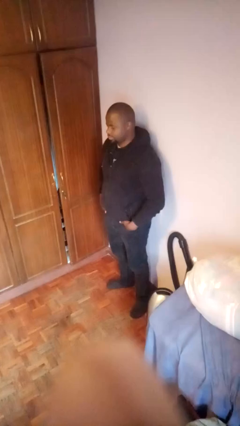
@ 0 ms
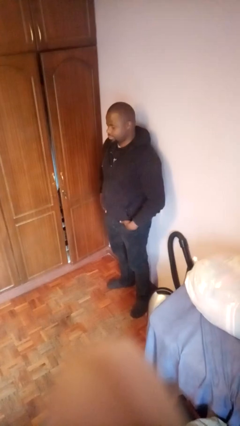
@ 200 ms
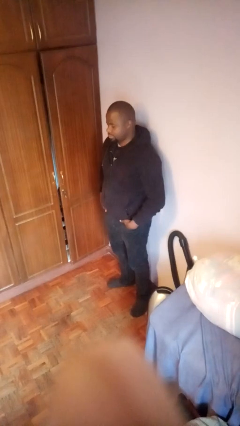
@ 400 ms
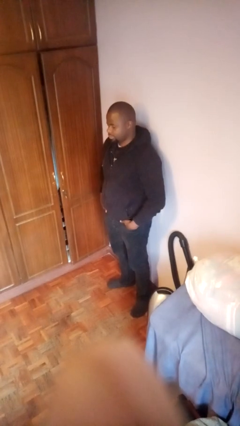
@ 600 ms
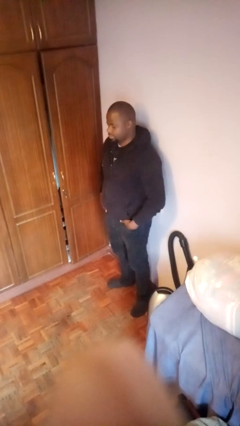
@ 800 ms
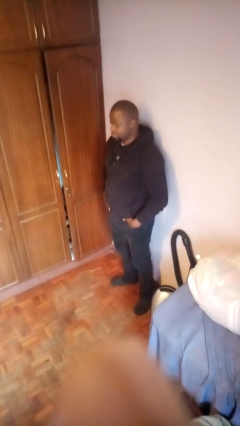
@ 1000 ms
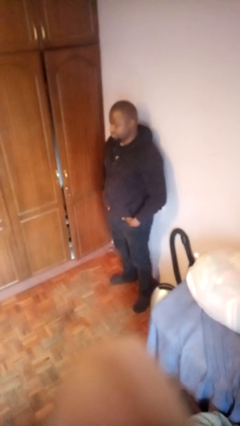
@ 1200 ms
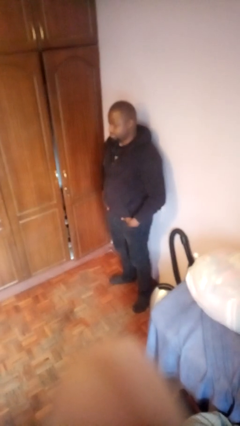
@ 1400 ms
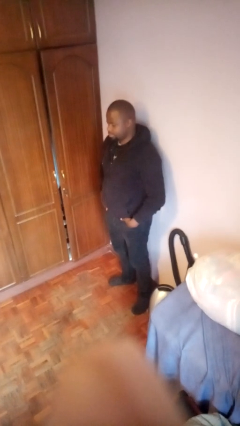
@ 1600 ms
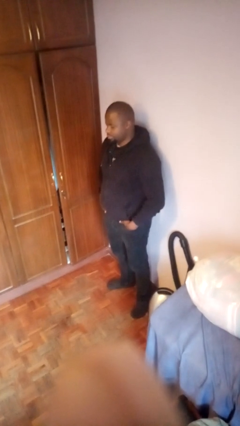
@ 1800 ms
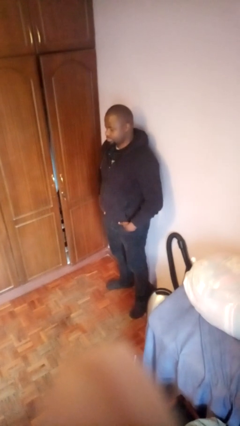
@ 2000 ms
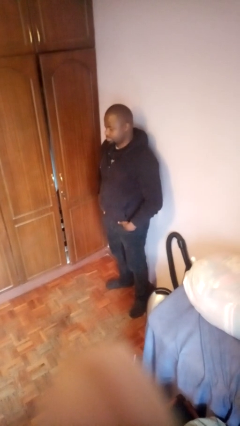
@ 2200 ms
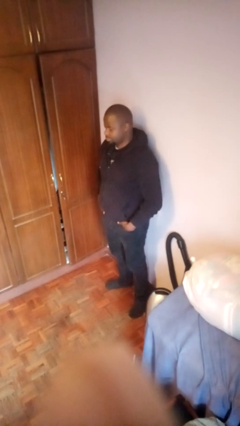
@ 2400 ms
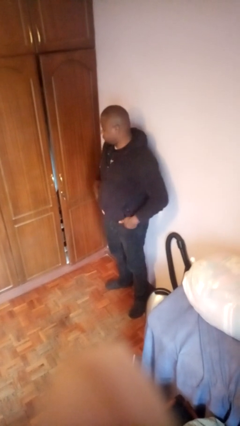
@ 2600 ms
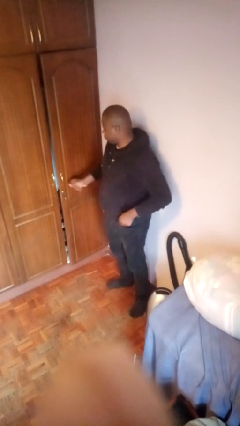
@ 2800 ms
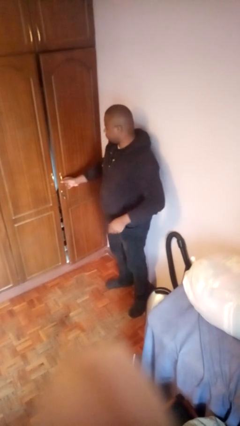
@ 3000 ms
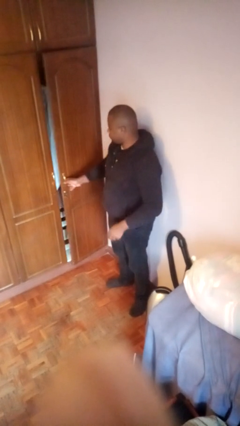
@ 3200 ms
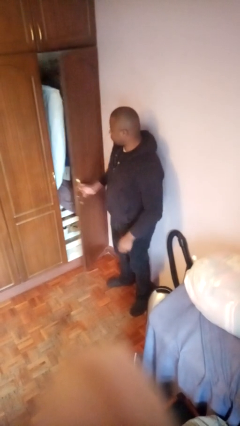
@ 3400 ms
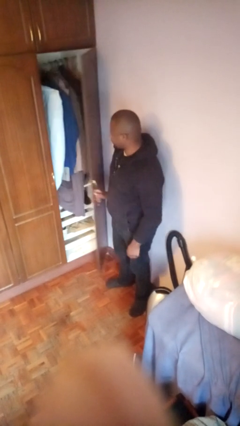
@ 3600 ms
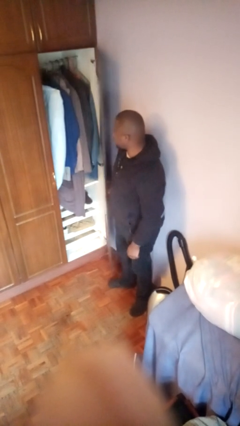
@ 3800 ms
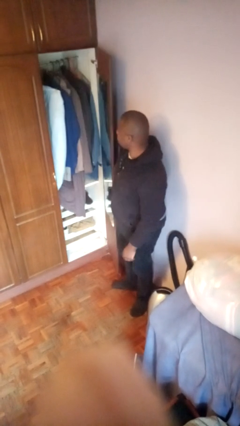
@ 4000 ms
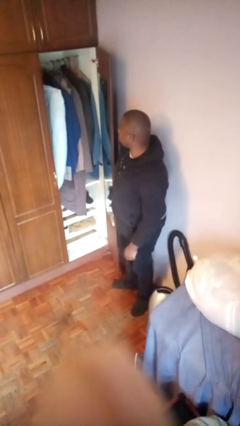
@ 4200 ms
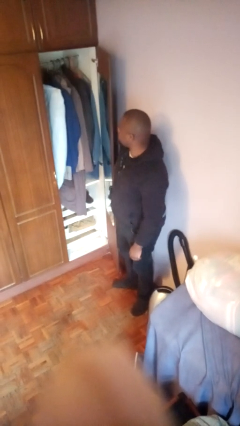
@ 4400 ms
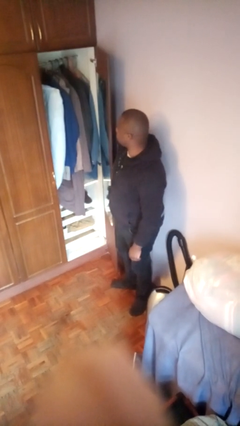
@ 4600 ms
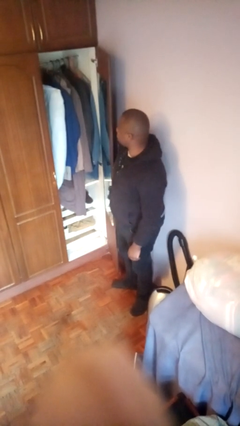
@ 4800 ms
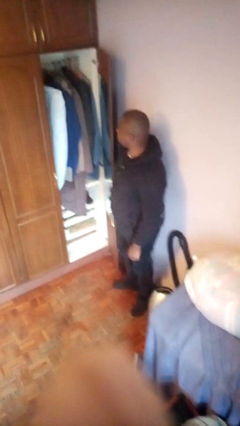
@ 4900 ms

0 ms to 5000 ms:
person opens closet door

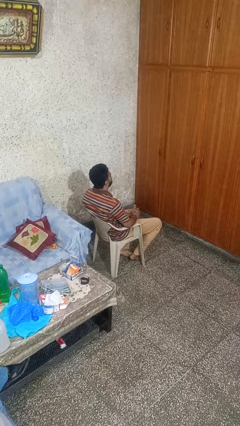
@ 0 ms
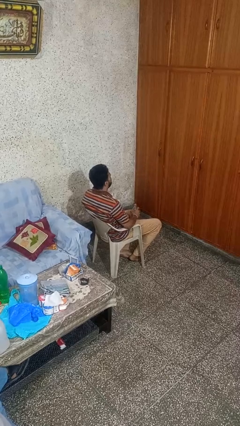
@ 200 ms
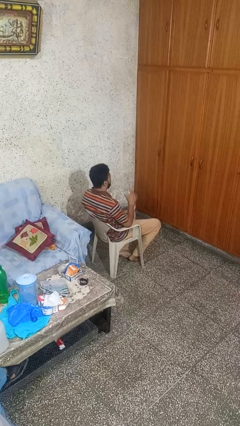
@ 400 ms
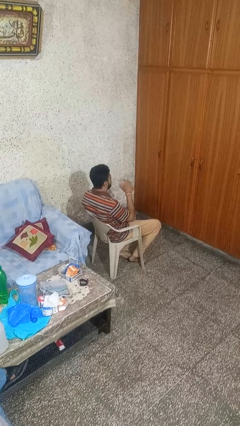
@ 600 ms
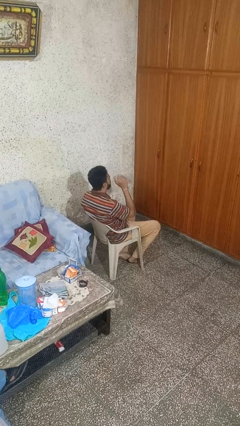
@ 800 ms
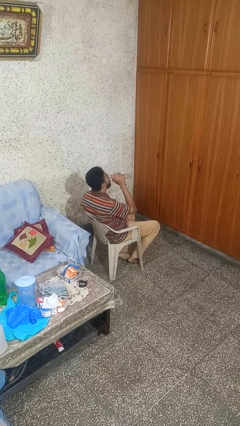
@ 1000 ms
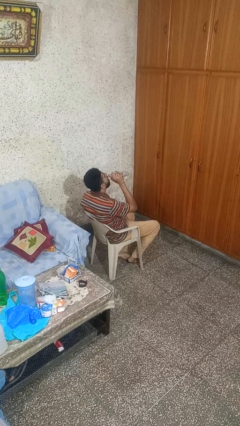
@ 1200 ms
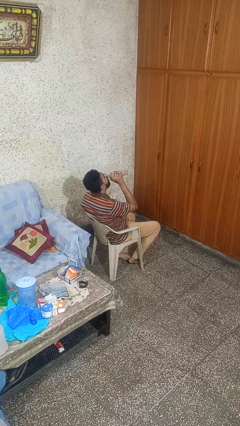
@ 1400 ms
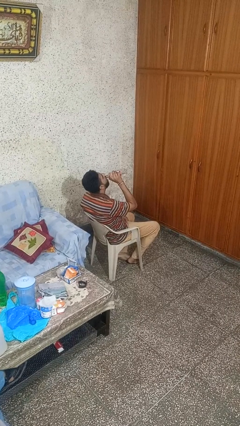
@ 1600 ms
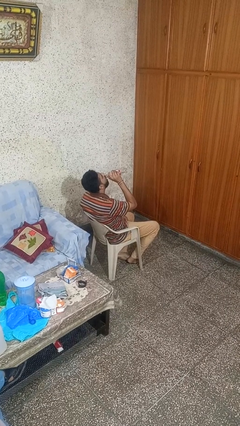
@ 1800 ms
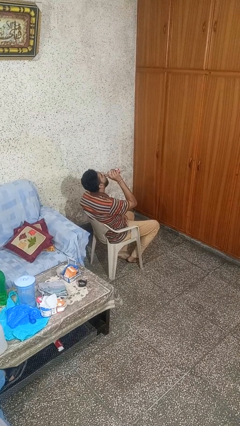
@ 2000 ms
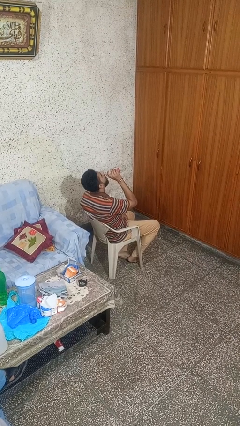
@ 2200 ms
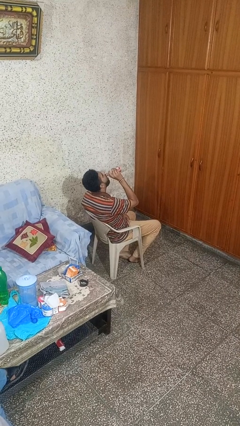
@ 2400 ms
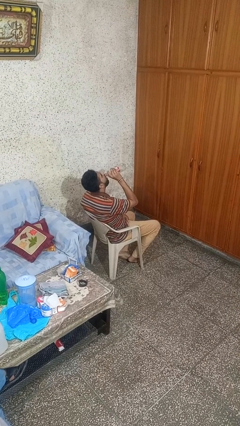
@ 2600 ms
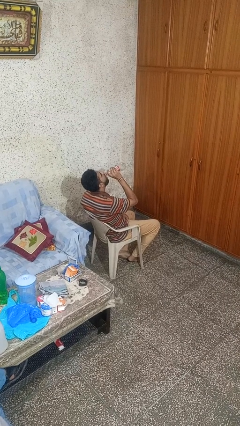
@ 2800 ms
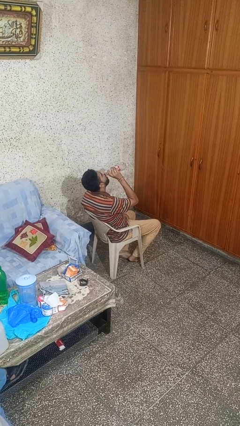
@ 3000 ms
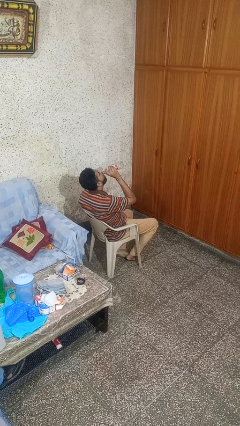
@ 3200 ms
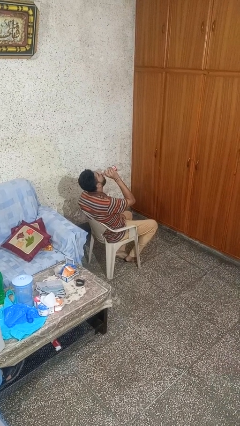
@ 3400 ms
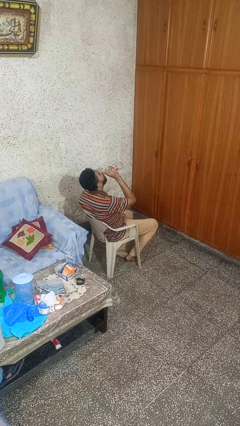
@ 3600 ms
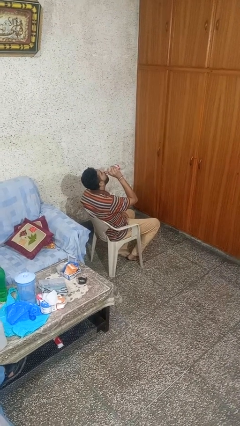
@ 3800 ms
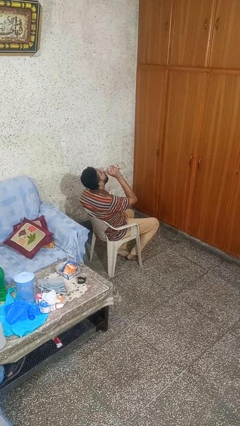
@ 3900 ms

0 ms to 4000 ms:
person drinks from bottle

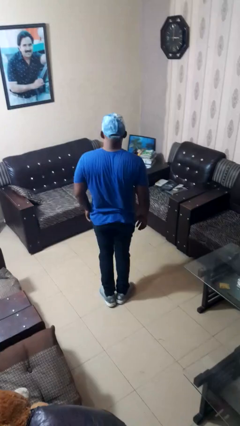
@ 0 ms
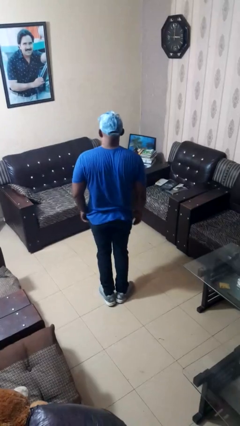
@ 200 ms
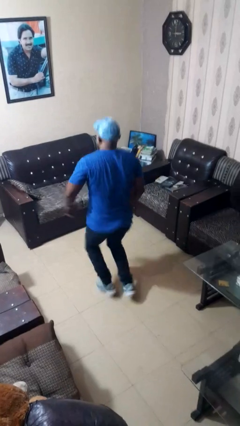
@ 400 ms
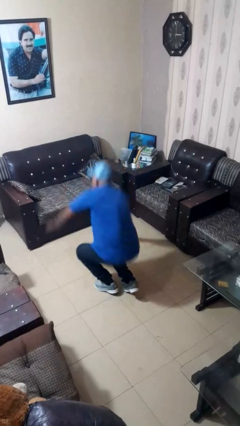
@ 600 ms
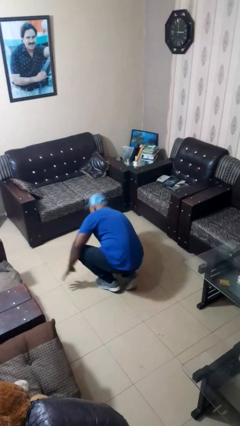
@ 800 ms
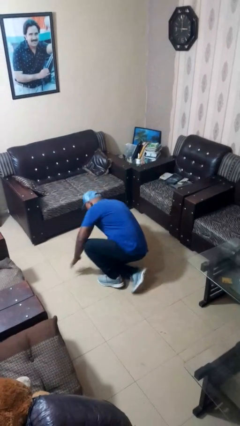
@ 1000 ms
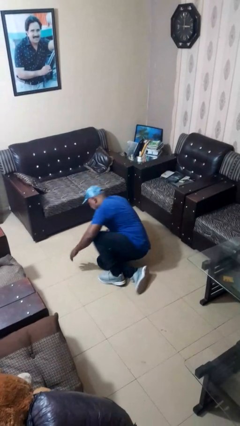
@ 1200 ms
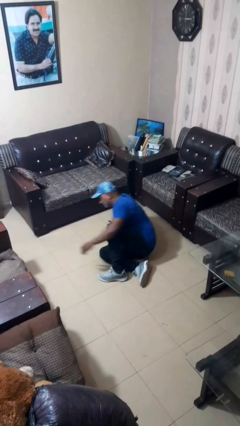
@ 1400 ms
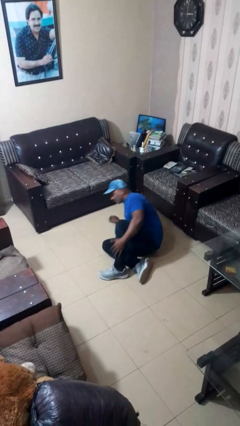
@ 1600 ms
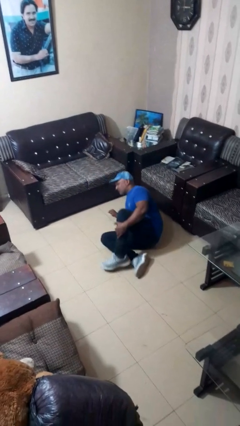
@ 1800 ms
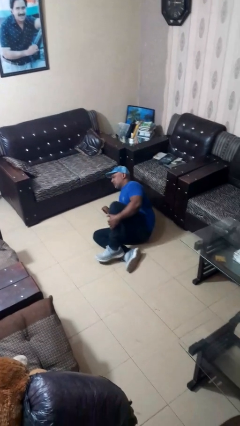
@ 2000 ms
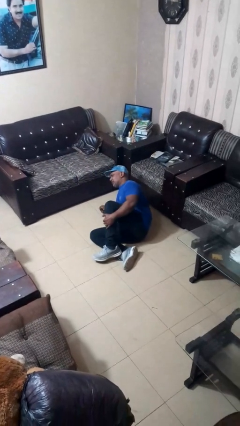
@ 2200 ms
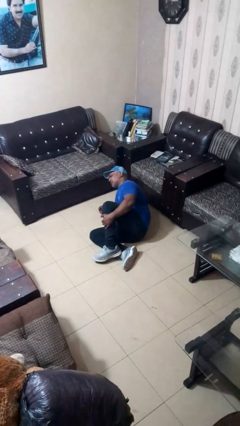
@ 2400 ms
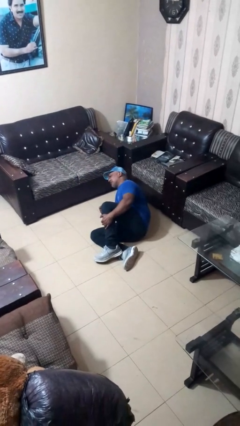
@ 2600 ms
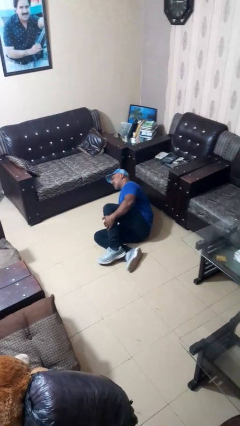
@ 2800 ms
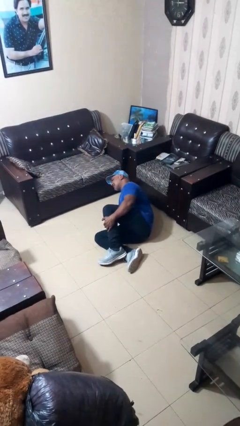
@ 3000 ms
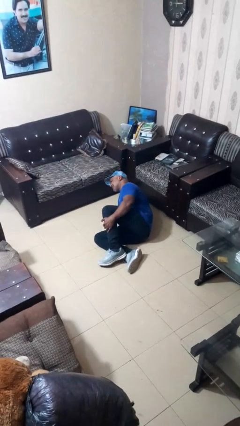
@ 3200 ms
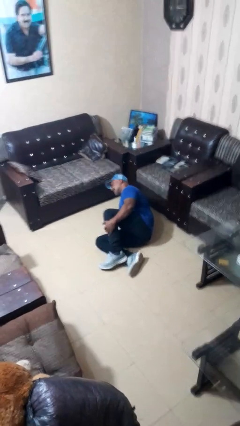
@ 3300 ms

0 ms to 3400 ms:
person trips on object on floor

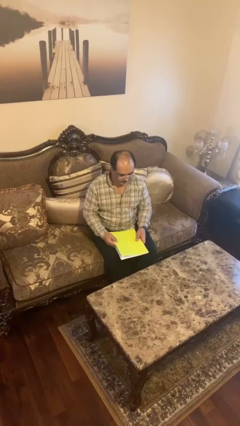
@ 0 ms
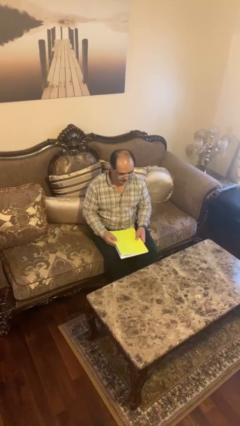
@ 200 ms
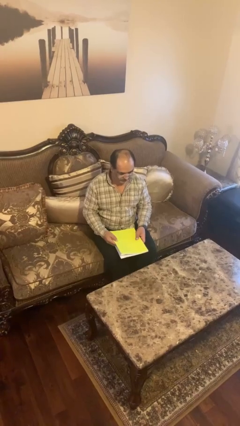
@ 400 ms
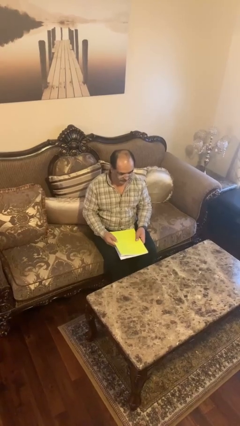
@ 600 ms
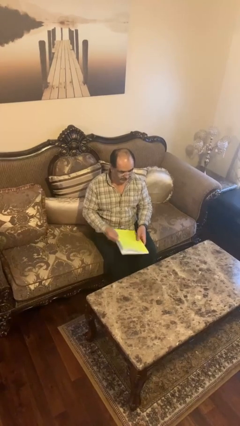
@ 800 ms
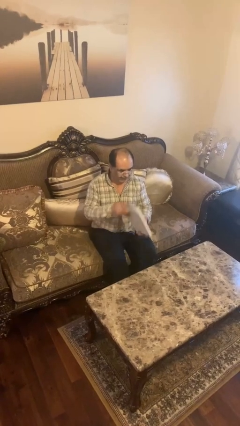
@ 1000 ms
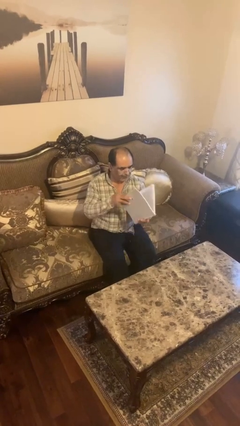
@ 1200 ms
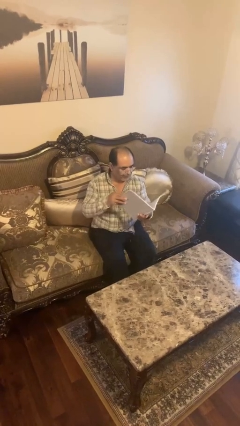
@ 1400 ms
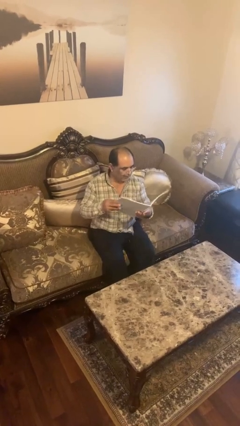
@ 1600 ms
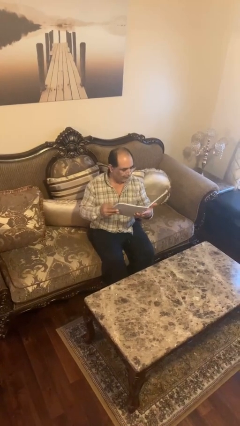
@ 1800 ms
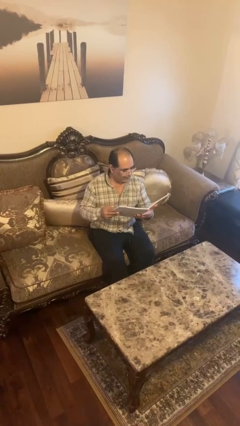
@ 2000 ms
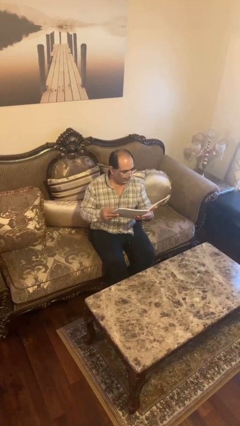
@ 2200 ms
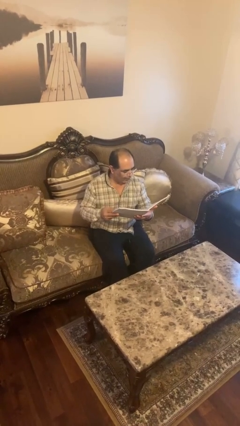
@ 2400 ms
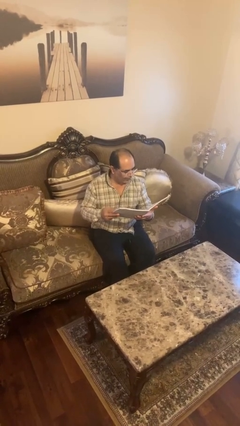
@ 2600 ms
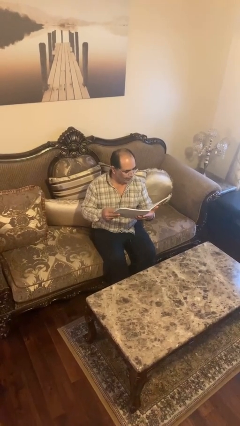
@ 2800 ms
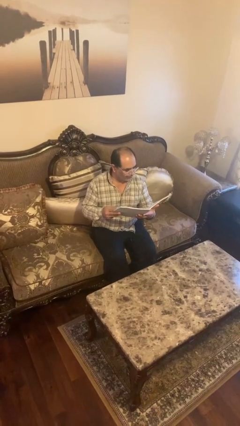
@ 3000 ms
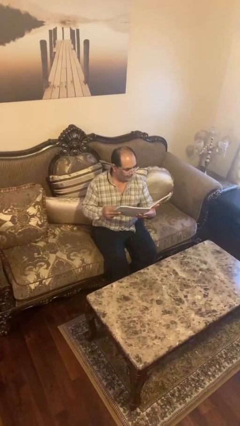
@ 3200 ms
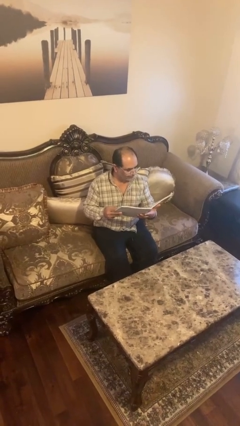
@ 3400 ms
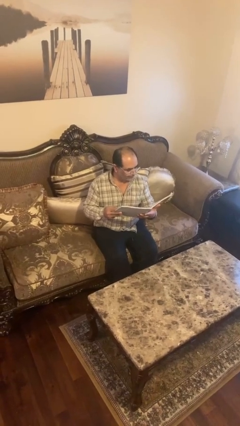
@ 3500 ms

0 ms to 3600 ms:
person reads document

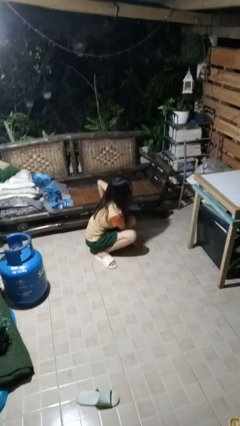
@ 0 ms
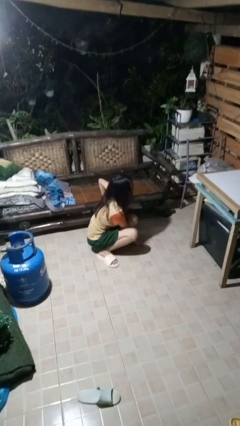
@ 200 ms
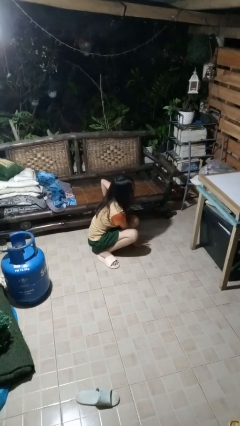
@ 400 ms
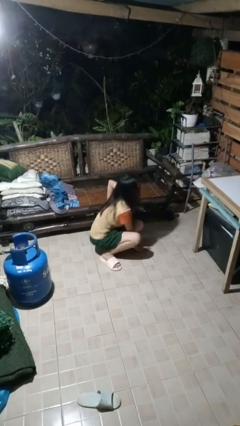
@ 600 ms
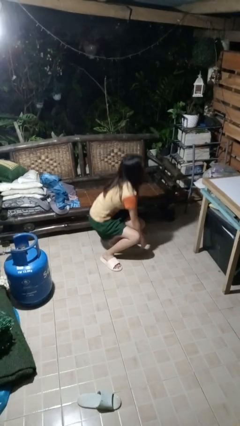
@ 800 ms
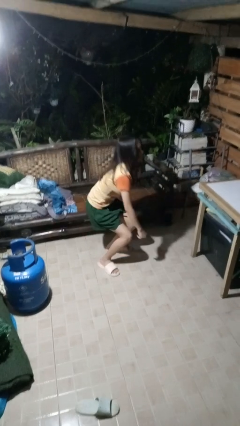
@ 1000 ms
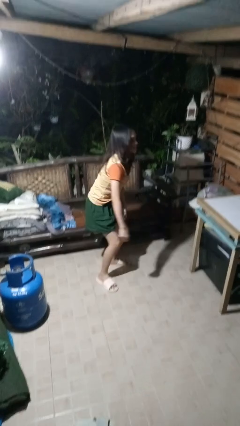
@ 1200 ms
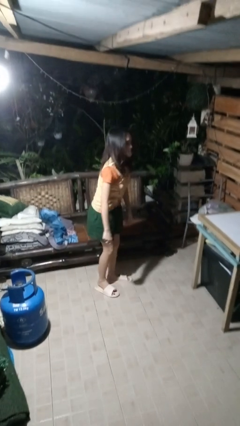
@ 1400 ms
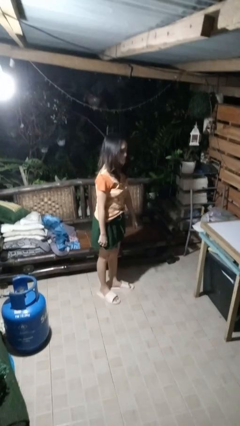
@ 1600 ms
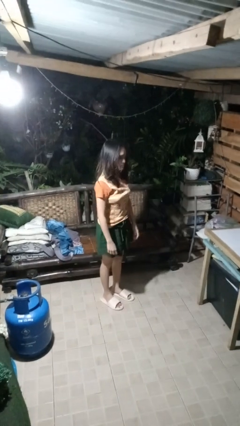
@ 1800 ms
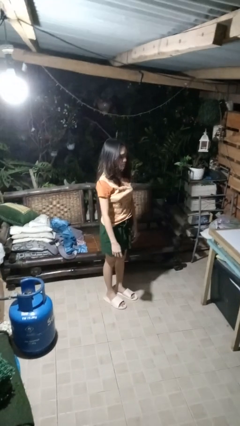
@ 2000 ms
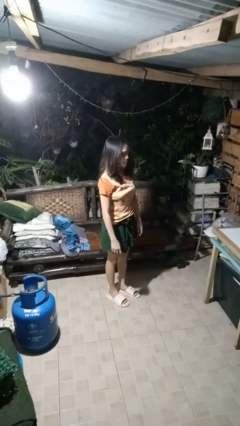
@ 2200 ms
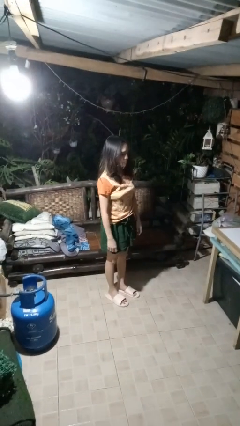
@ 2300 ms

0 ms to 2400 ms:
person stands up from floor
